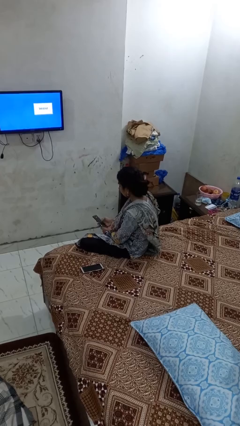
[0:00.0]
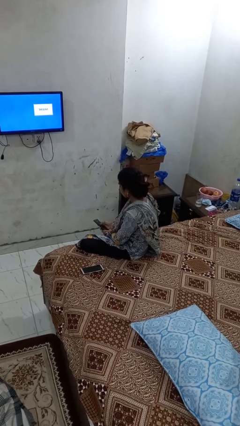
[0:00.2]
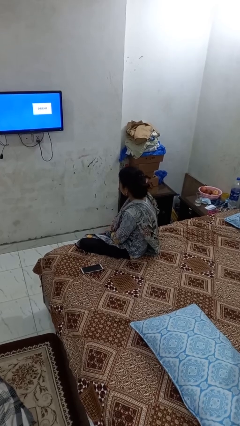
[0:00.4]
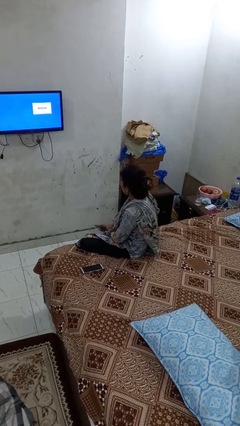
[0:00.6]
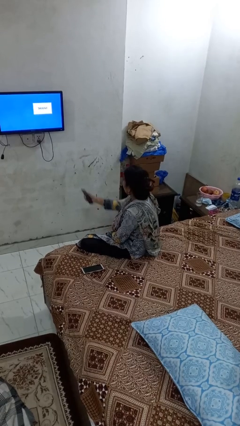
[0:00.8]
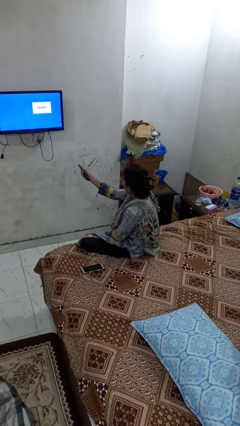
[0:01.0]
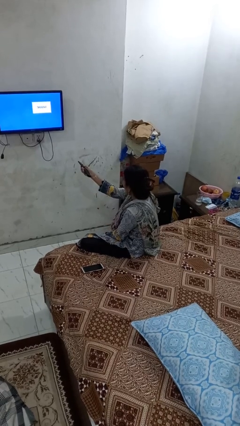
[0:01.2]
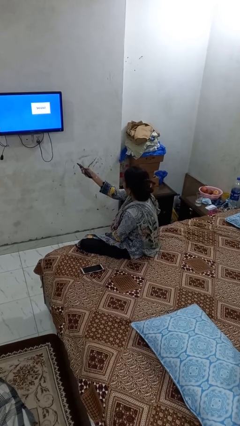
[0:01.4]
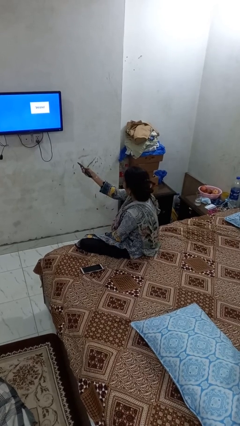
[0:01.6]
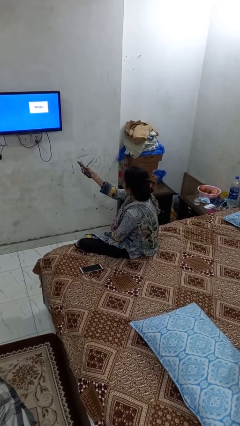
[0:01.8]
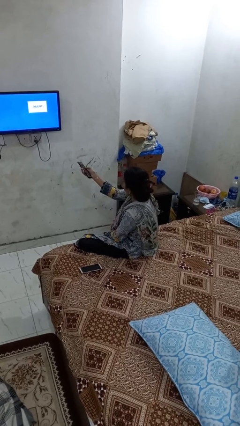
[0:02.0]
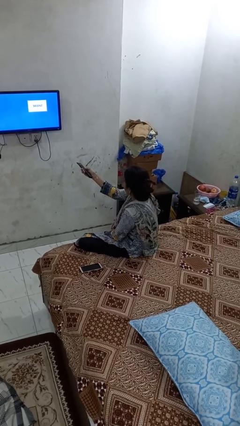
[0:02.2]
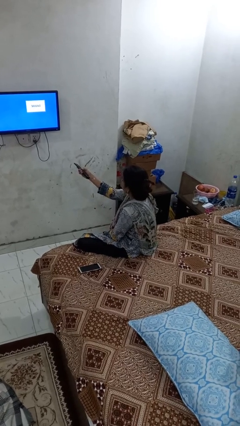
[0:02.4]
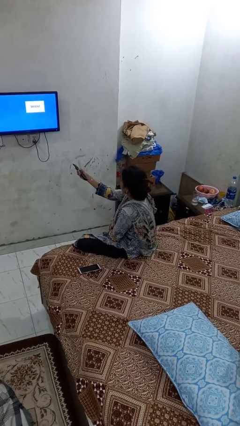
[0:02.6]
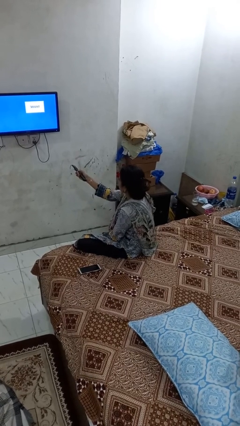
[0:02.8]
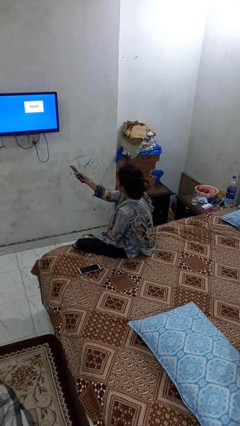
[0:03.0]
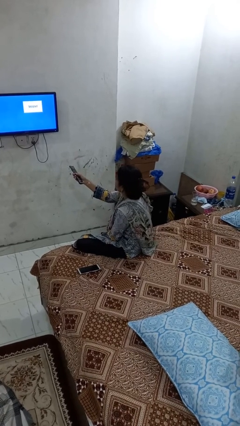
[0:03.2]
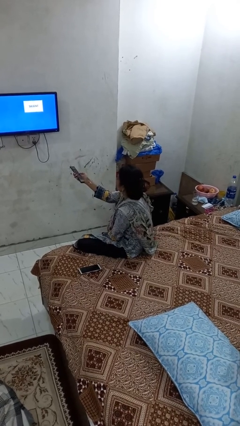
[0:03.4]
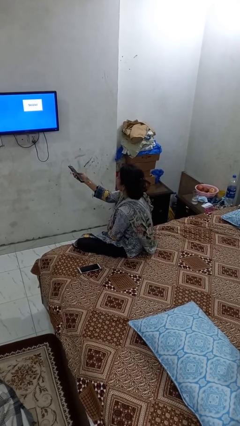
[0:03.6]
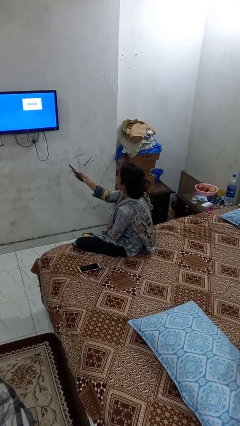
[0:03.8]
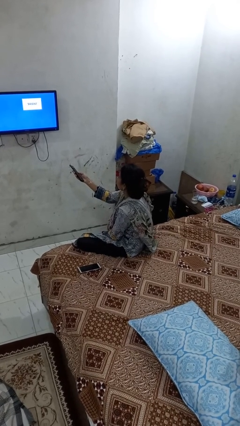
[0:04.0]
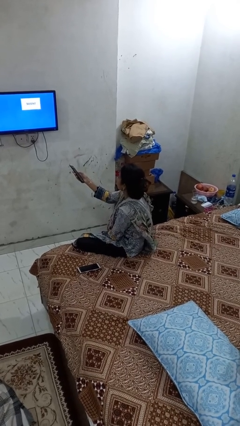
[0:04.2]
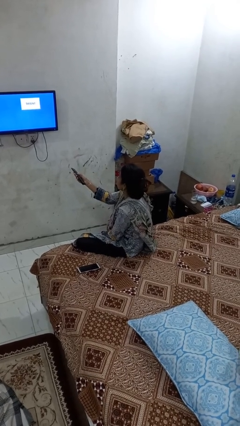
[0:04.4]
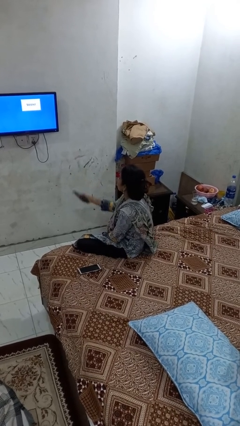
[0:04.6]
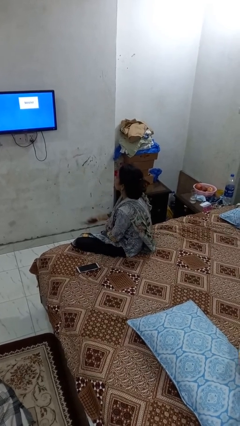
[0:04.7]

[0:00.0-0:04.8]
person uses television remote

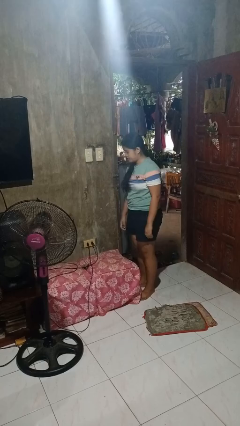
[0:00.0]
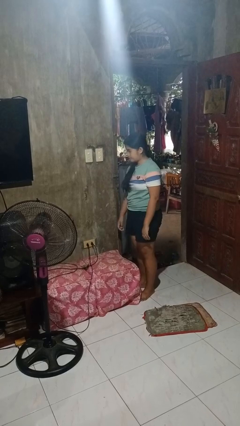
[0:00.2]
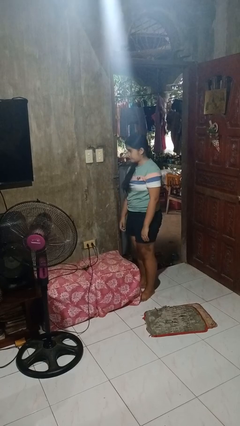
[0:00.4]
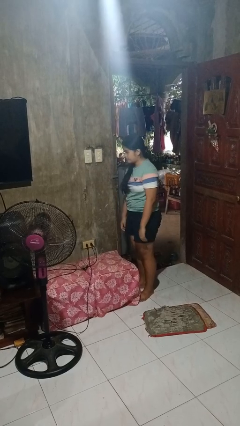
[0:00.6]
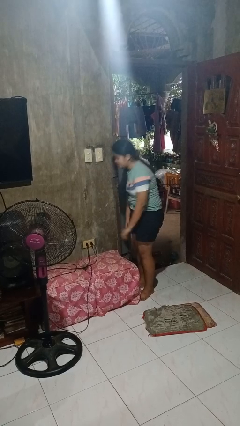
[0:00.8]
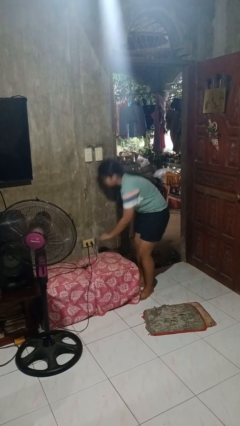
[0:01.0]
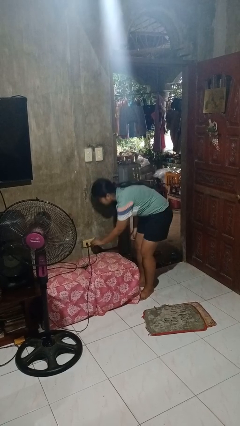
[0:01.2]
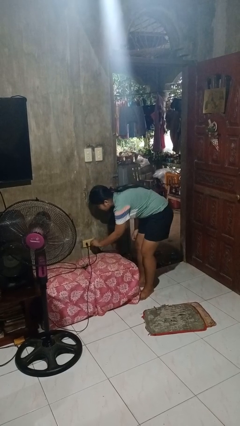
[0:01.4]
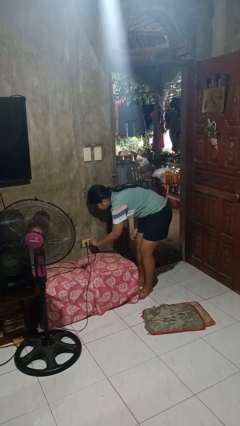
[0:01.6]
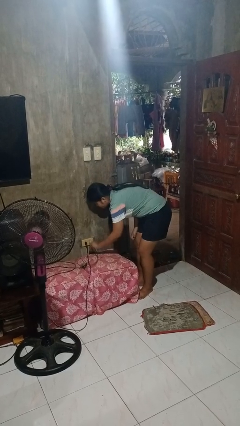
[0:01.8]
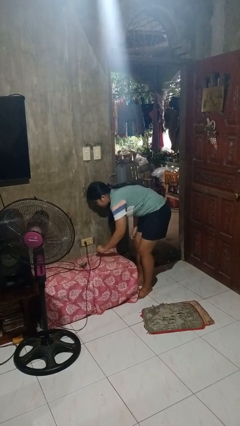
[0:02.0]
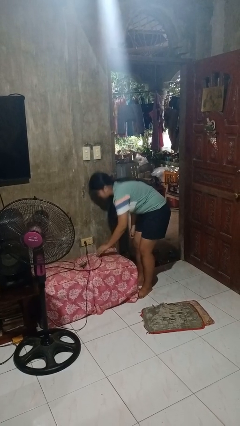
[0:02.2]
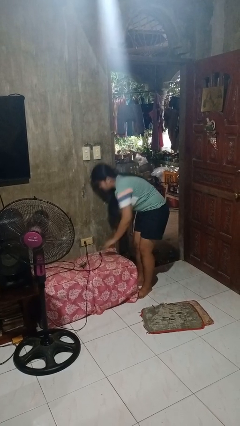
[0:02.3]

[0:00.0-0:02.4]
person unplugs from electrical socket

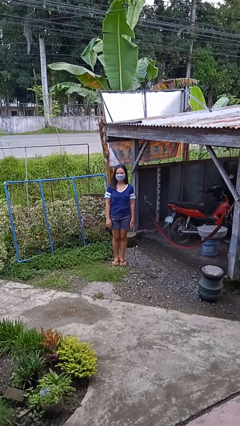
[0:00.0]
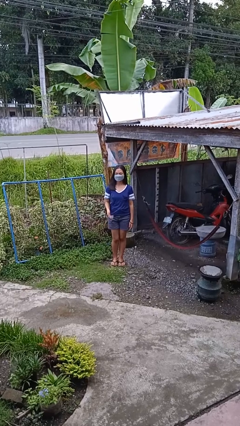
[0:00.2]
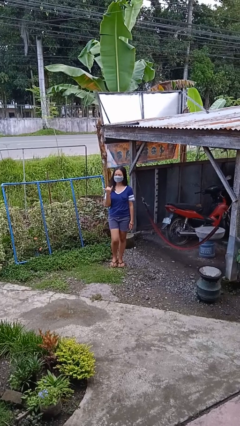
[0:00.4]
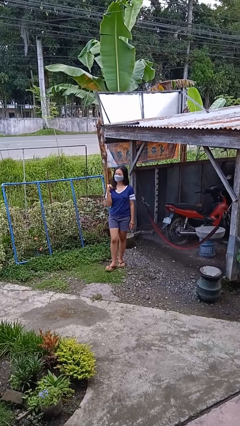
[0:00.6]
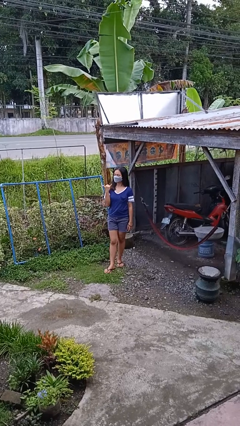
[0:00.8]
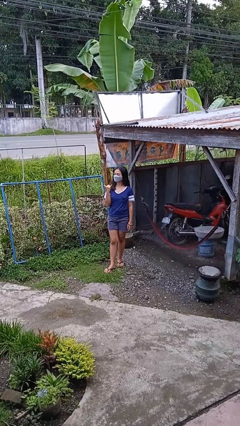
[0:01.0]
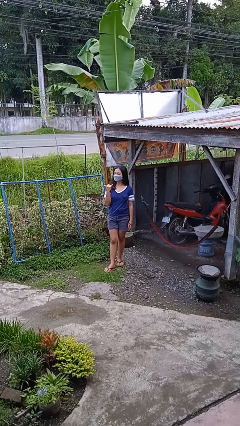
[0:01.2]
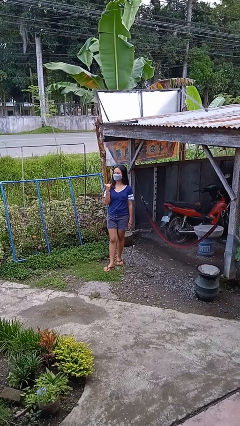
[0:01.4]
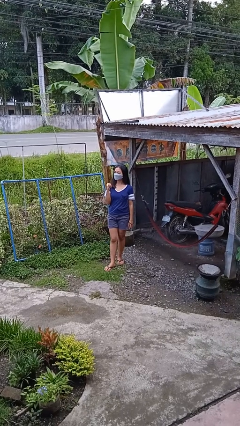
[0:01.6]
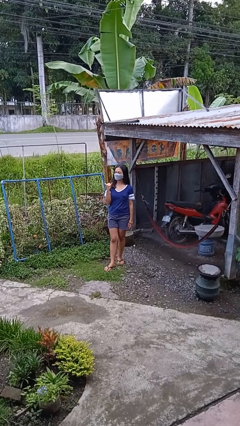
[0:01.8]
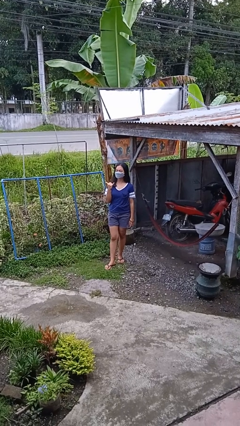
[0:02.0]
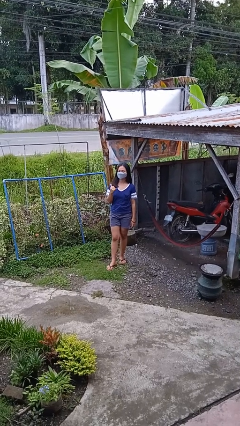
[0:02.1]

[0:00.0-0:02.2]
person gestures hang loose

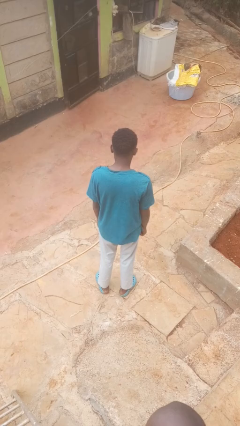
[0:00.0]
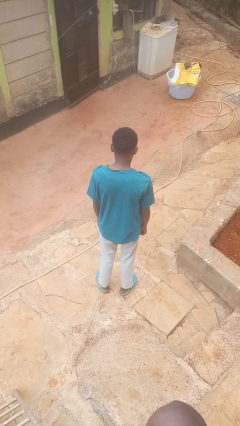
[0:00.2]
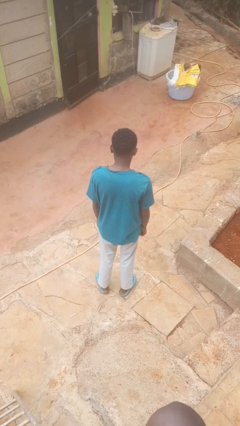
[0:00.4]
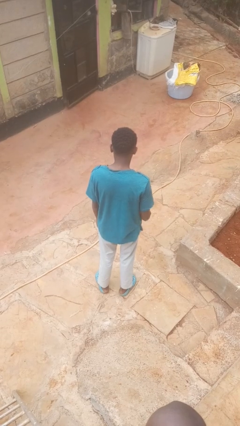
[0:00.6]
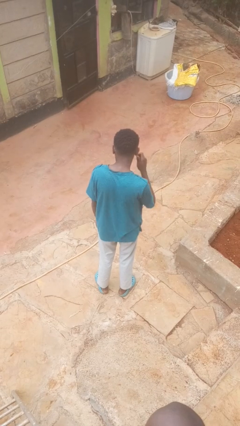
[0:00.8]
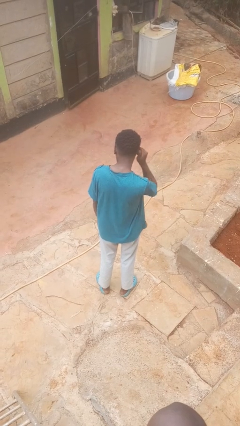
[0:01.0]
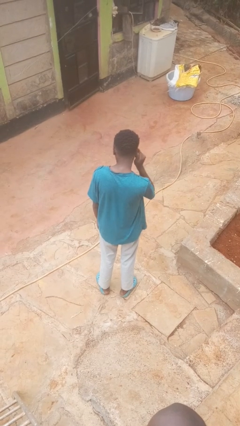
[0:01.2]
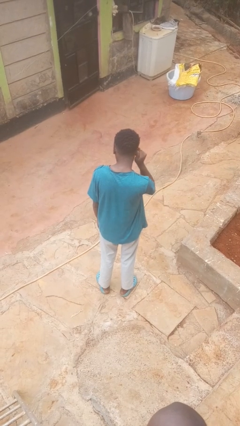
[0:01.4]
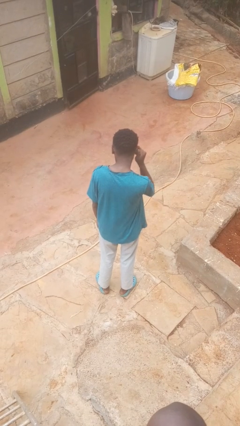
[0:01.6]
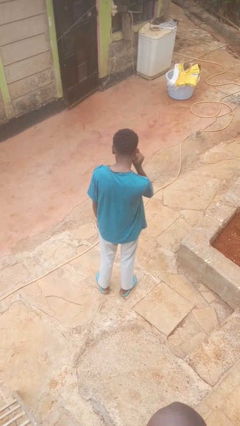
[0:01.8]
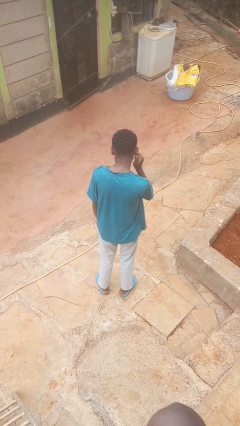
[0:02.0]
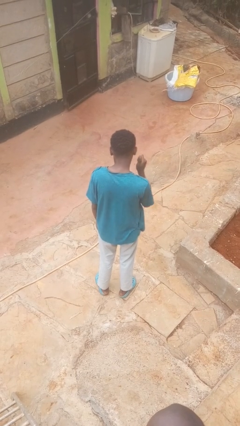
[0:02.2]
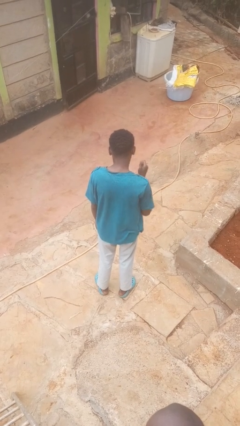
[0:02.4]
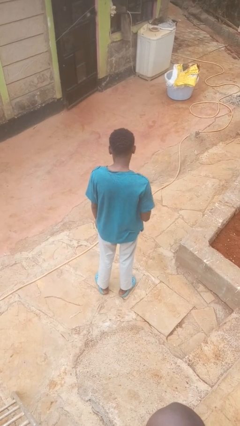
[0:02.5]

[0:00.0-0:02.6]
person touches earlobe

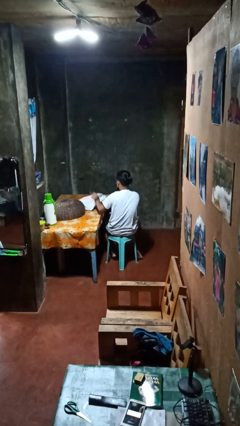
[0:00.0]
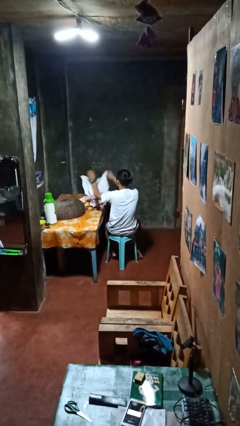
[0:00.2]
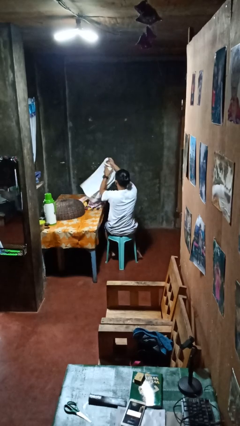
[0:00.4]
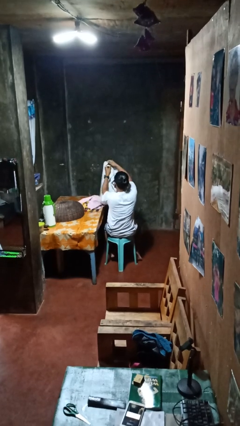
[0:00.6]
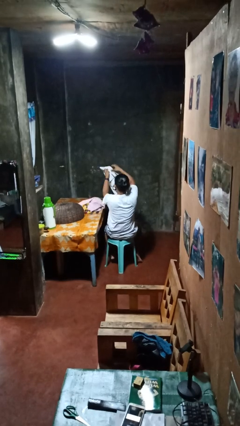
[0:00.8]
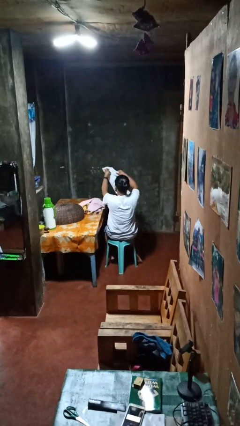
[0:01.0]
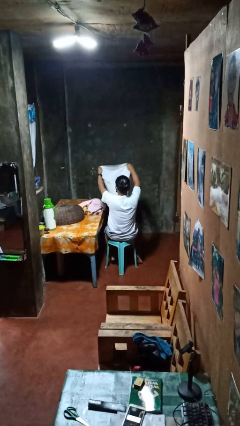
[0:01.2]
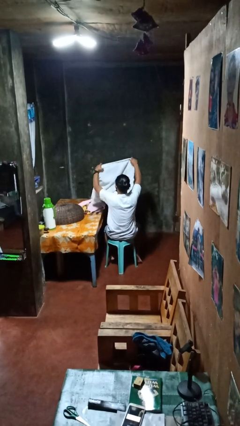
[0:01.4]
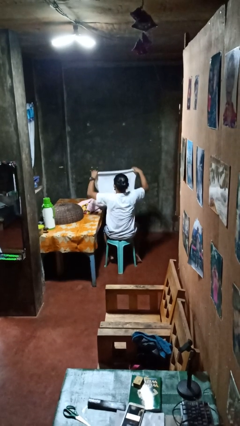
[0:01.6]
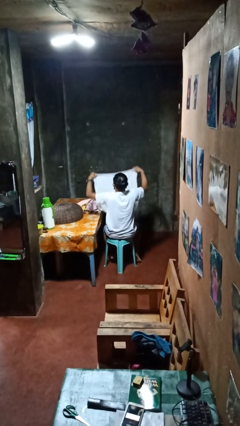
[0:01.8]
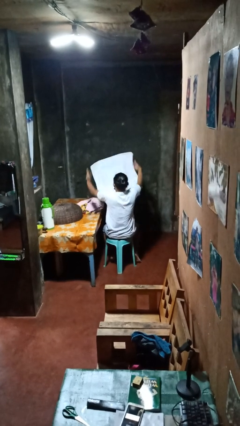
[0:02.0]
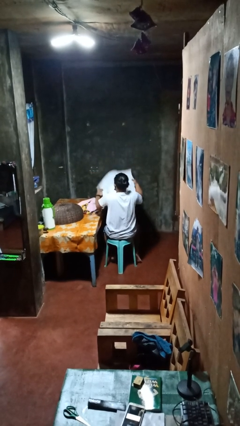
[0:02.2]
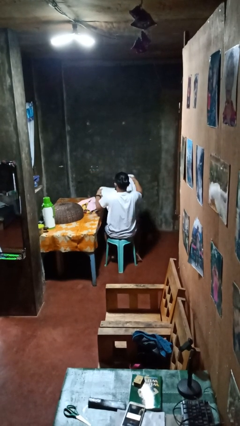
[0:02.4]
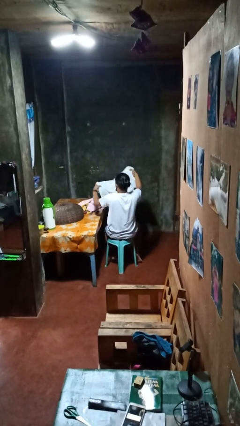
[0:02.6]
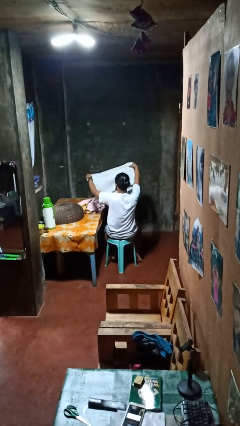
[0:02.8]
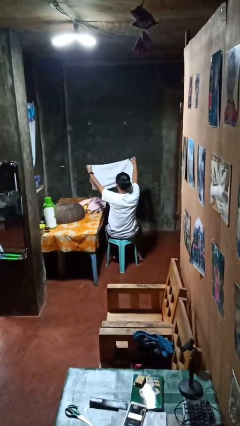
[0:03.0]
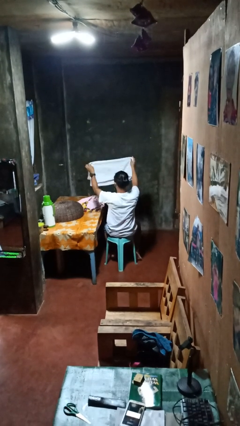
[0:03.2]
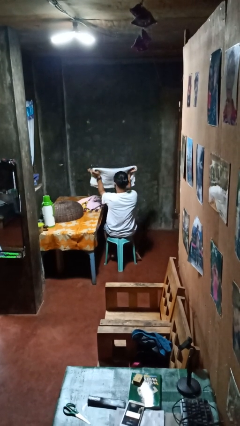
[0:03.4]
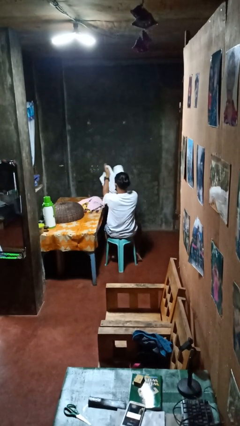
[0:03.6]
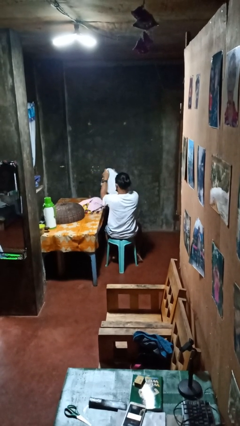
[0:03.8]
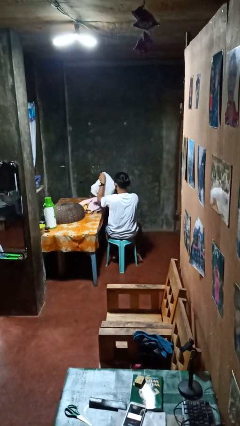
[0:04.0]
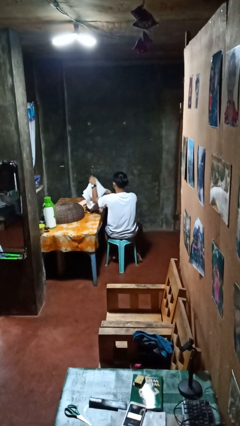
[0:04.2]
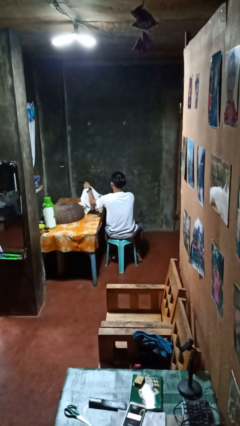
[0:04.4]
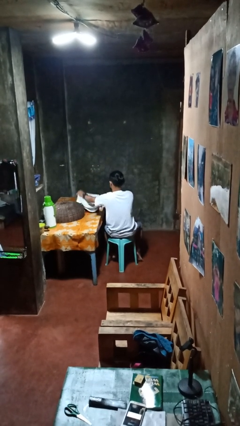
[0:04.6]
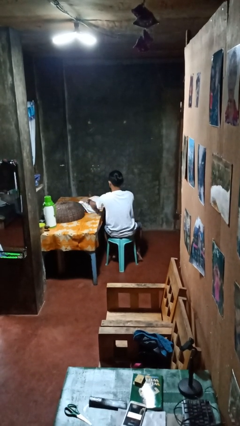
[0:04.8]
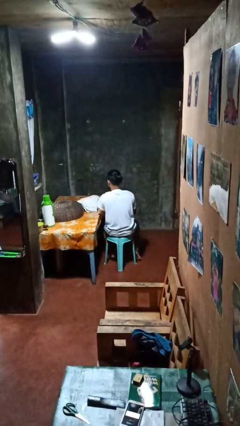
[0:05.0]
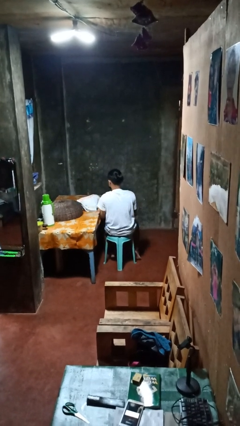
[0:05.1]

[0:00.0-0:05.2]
person folds towel
